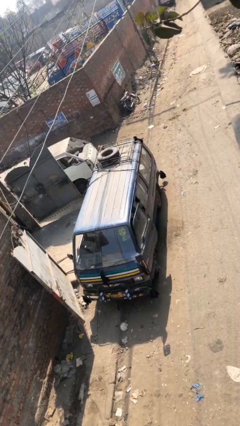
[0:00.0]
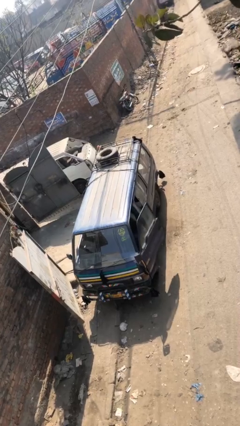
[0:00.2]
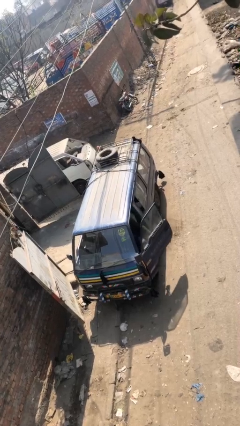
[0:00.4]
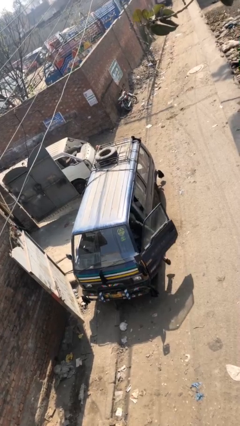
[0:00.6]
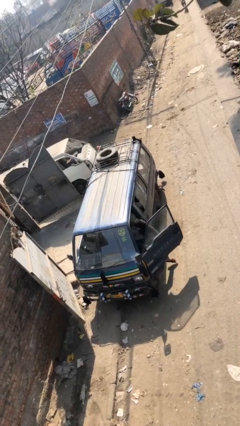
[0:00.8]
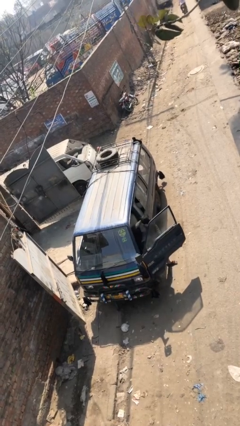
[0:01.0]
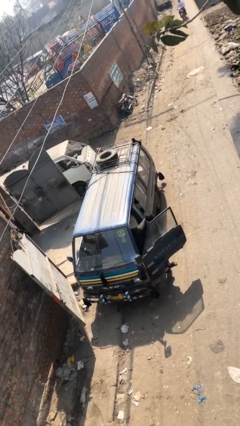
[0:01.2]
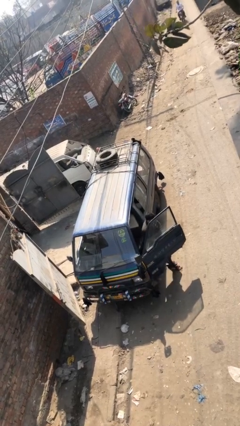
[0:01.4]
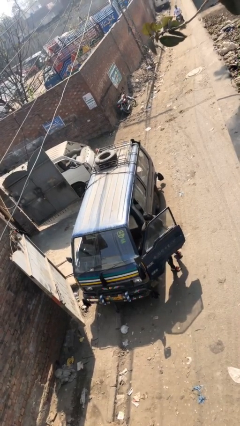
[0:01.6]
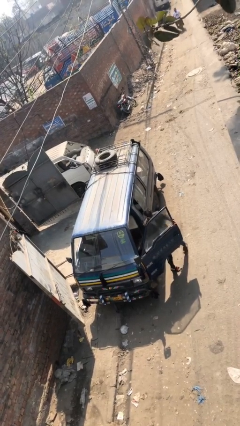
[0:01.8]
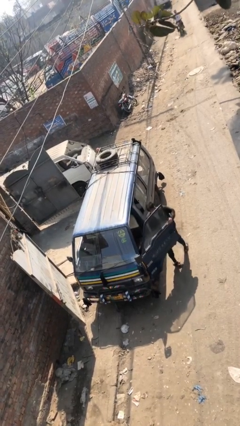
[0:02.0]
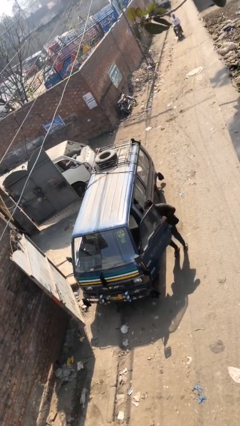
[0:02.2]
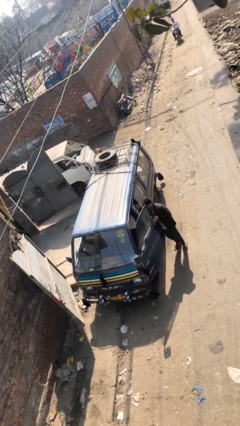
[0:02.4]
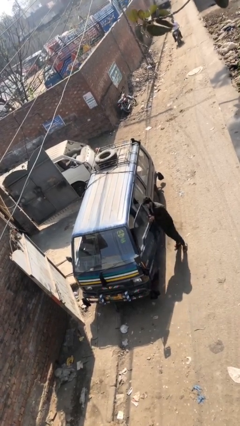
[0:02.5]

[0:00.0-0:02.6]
car drops off person

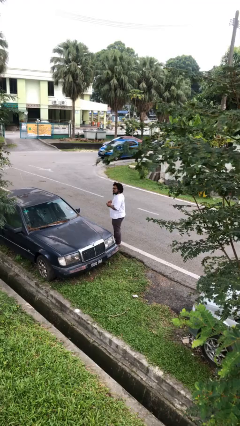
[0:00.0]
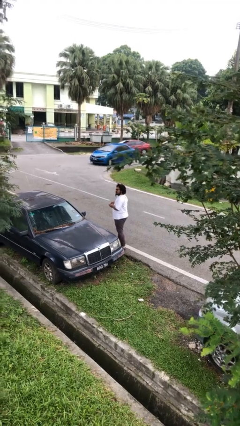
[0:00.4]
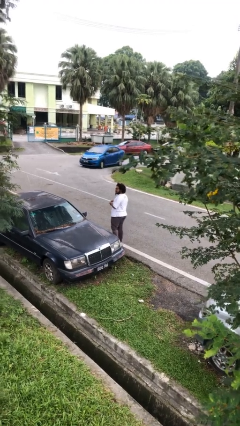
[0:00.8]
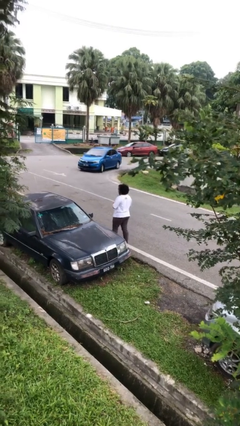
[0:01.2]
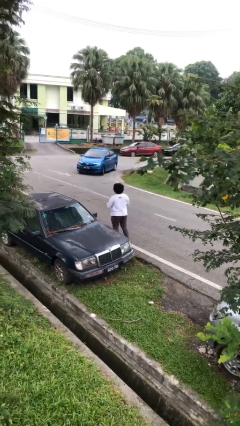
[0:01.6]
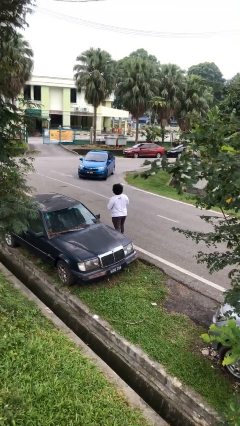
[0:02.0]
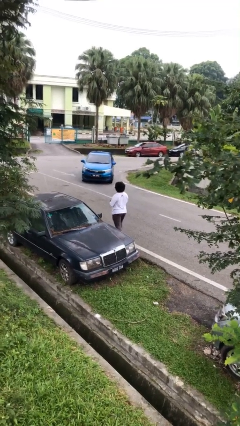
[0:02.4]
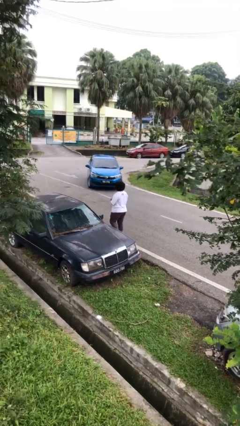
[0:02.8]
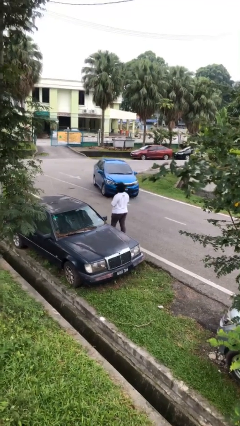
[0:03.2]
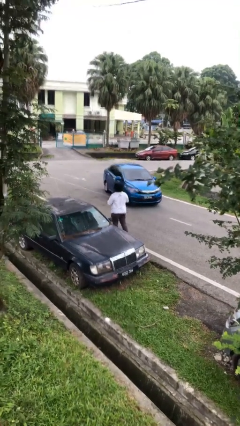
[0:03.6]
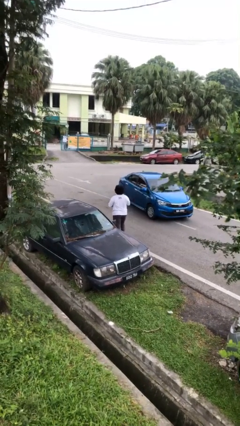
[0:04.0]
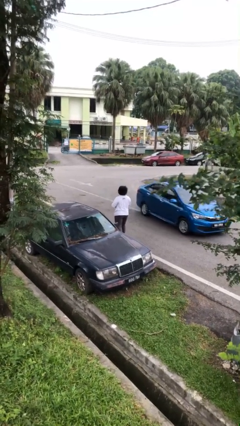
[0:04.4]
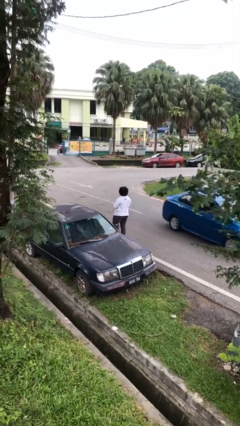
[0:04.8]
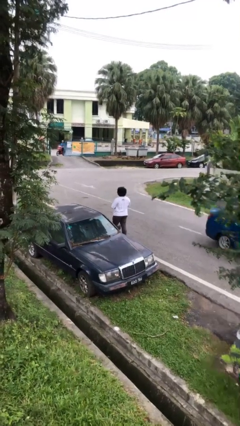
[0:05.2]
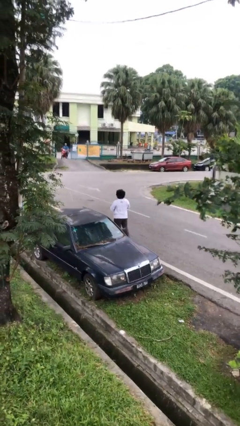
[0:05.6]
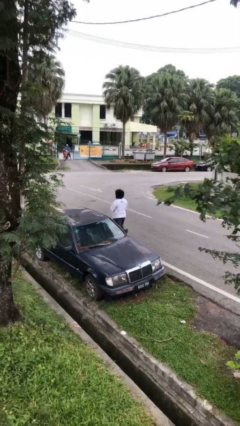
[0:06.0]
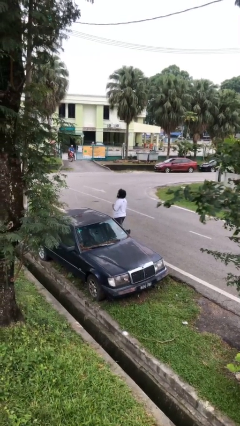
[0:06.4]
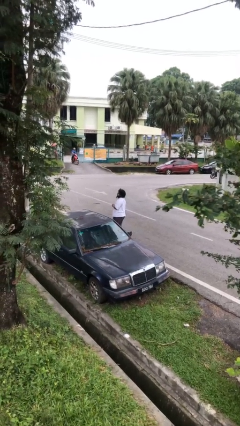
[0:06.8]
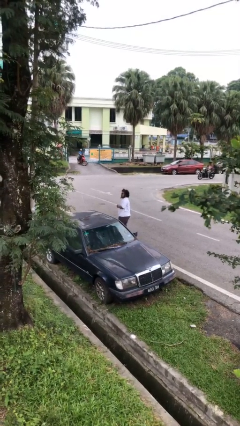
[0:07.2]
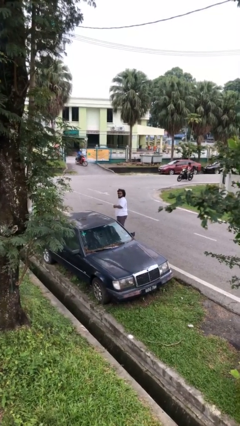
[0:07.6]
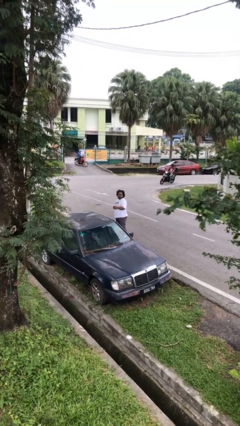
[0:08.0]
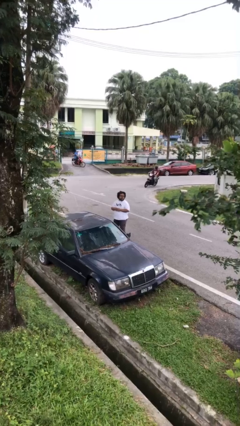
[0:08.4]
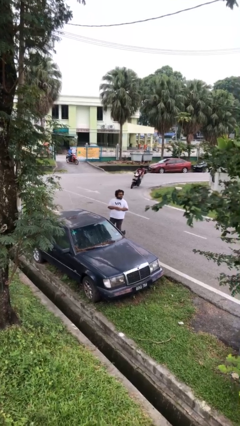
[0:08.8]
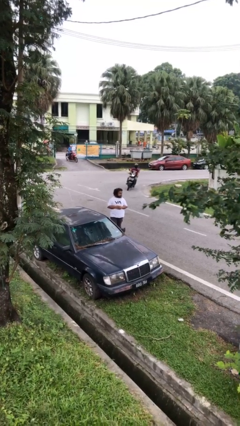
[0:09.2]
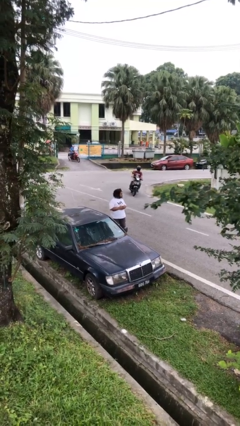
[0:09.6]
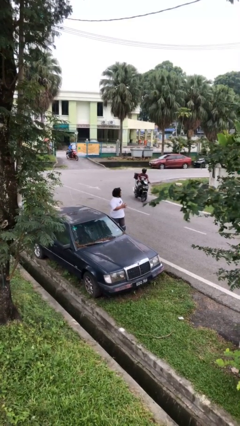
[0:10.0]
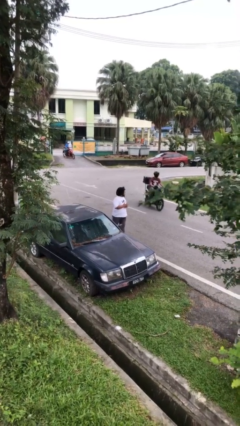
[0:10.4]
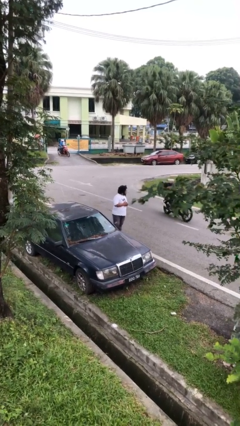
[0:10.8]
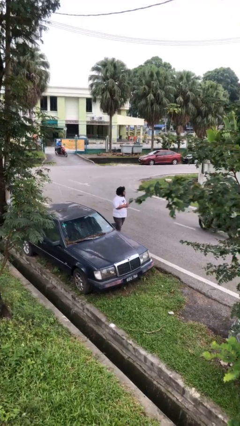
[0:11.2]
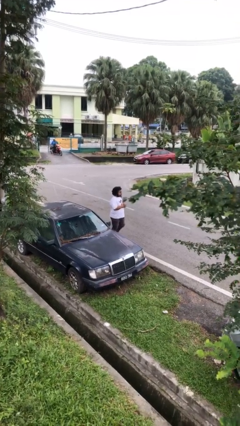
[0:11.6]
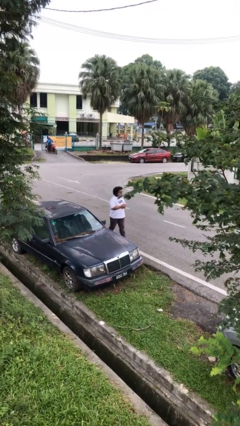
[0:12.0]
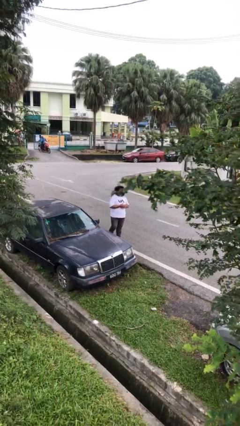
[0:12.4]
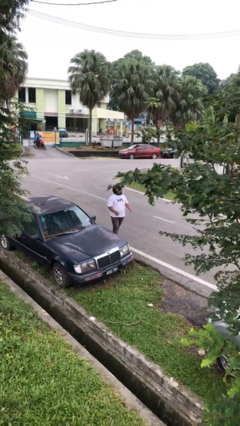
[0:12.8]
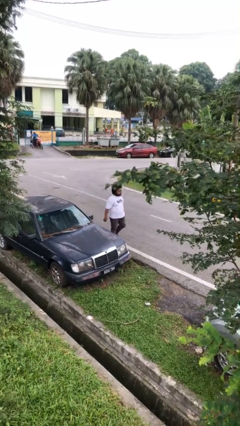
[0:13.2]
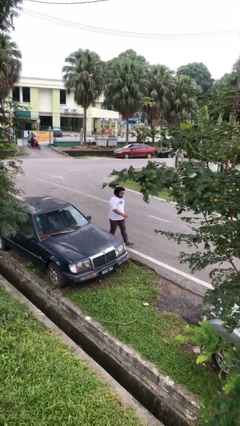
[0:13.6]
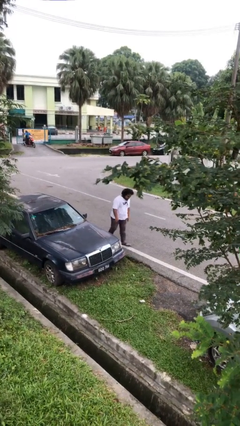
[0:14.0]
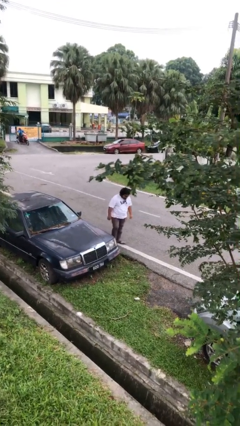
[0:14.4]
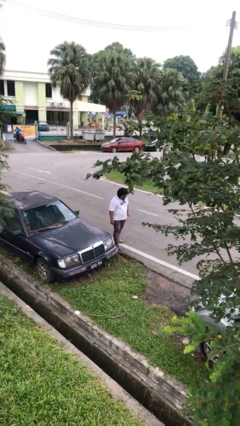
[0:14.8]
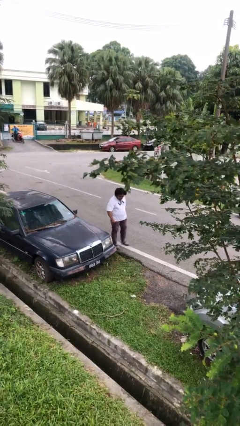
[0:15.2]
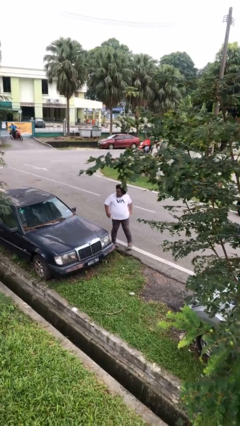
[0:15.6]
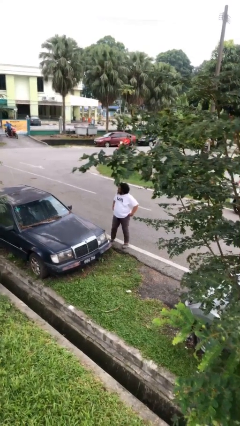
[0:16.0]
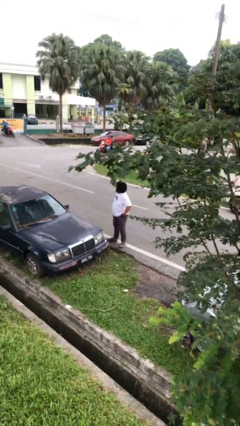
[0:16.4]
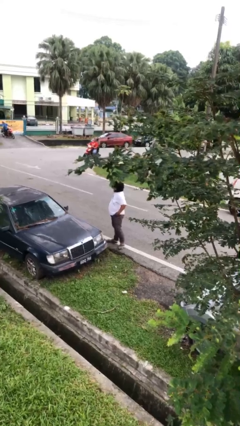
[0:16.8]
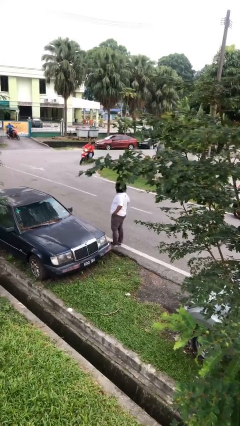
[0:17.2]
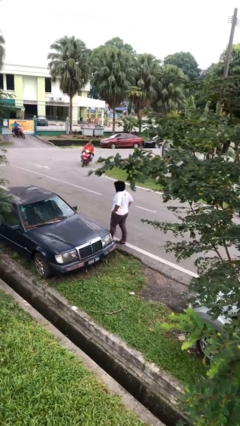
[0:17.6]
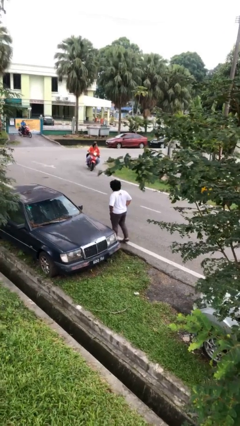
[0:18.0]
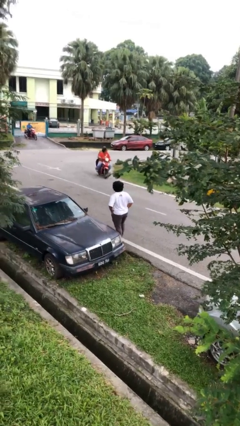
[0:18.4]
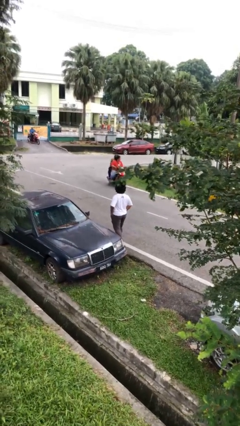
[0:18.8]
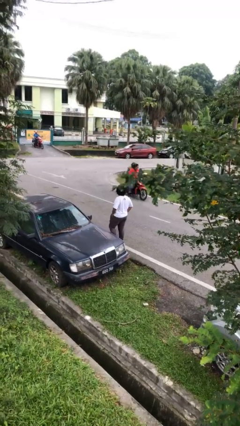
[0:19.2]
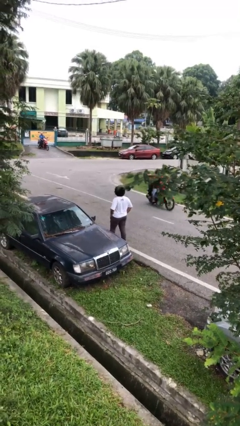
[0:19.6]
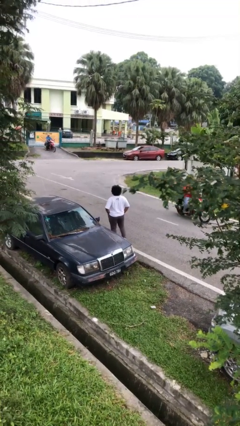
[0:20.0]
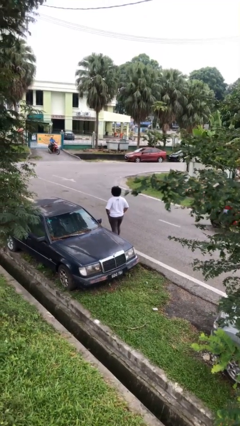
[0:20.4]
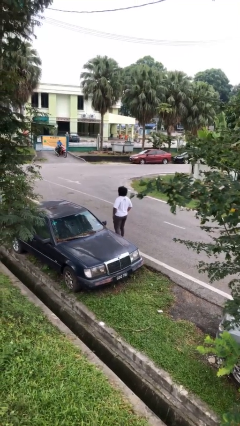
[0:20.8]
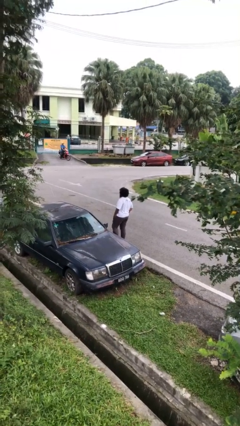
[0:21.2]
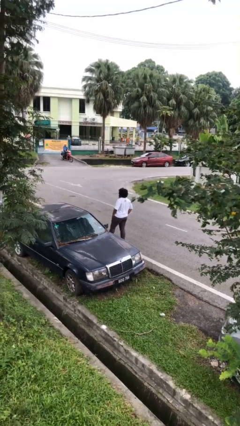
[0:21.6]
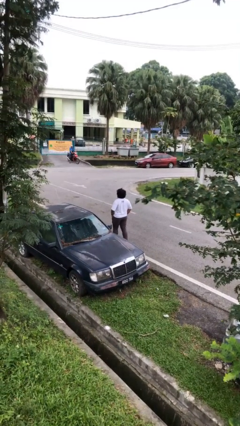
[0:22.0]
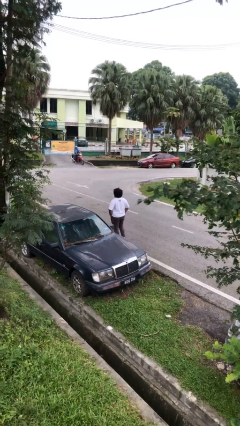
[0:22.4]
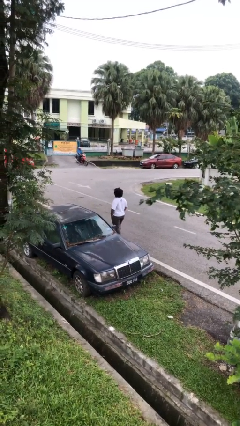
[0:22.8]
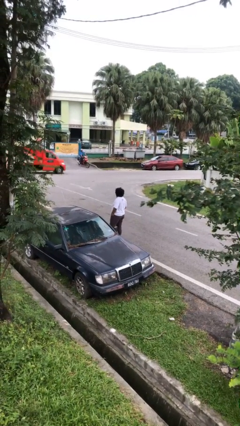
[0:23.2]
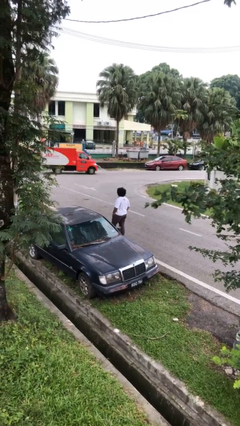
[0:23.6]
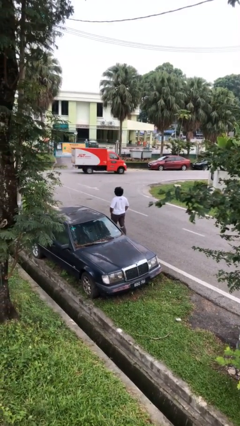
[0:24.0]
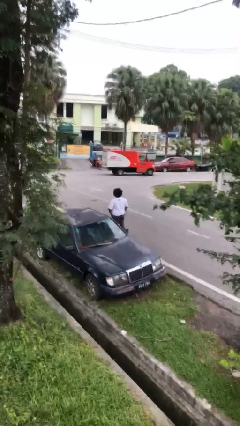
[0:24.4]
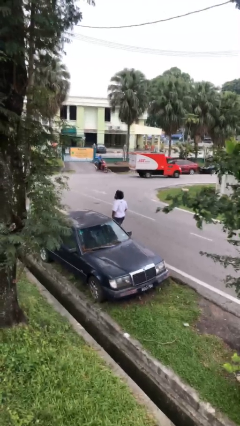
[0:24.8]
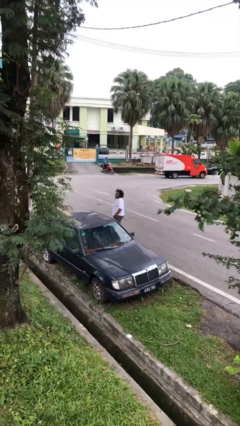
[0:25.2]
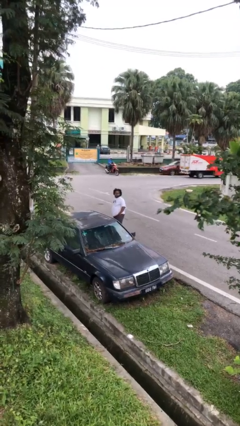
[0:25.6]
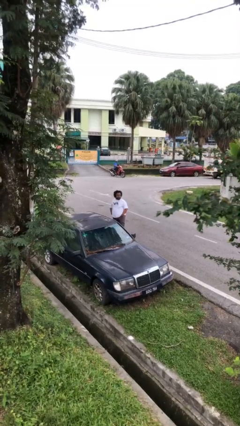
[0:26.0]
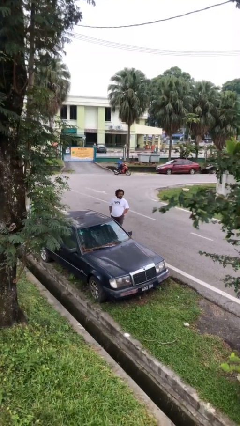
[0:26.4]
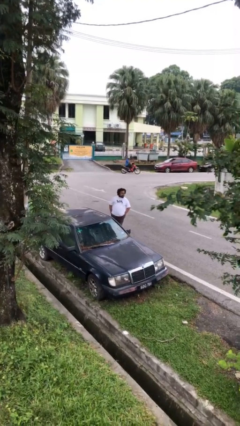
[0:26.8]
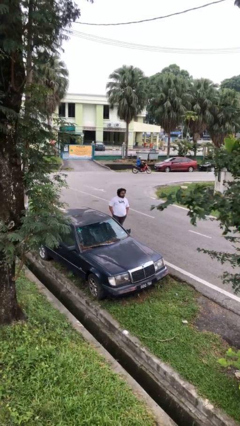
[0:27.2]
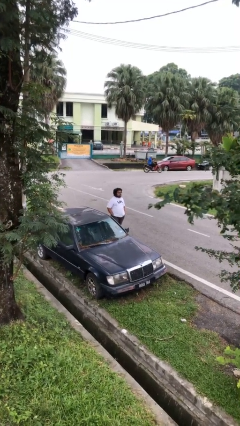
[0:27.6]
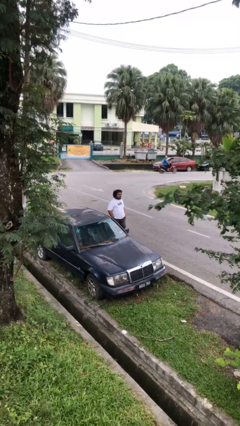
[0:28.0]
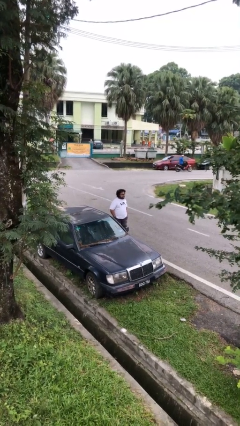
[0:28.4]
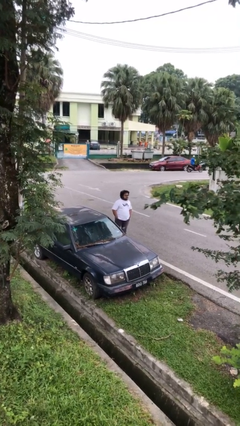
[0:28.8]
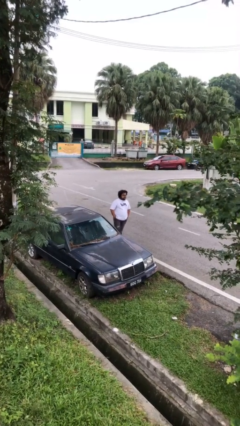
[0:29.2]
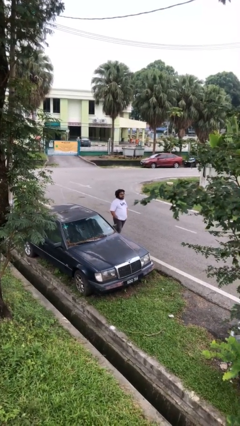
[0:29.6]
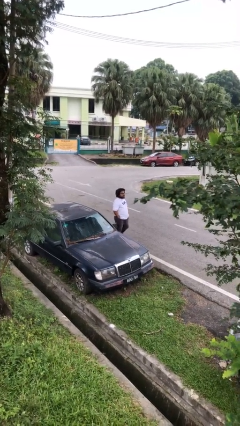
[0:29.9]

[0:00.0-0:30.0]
person walks

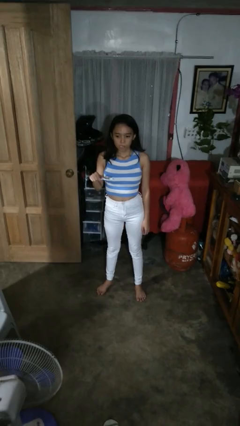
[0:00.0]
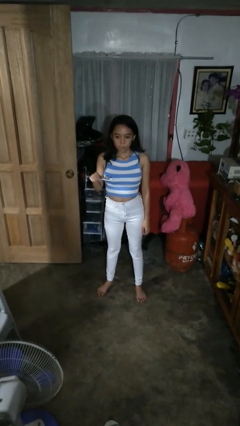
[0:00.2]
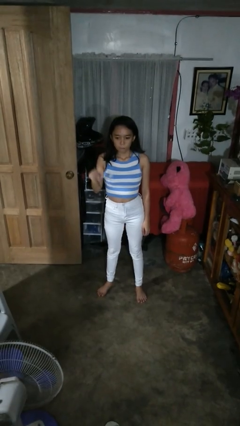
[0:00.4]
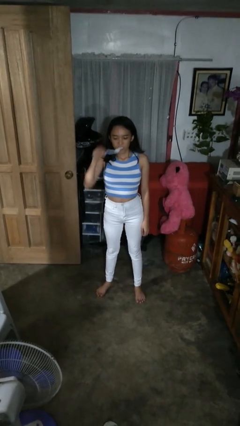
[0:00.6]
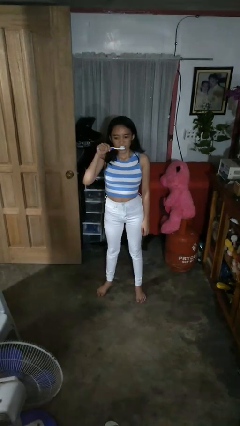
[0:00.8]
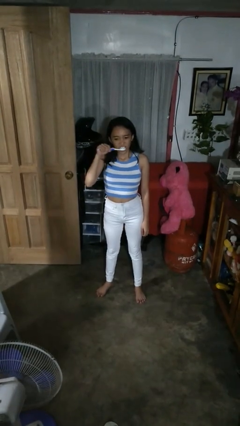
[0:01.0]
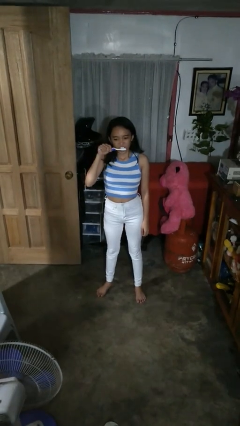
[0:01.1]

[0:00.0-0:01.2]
person brushes teeth
